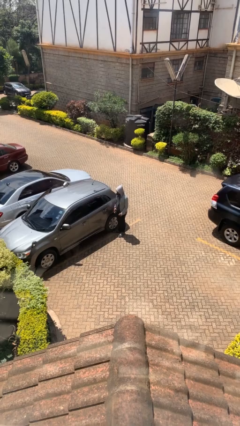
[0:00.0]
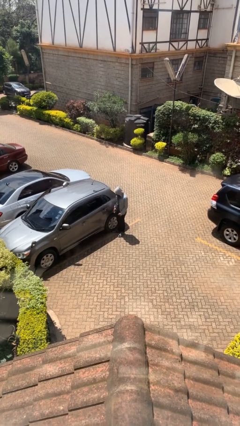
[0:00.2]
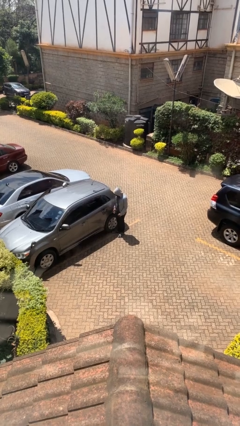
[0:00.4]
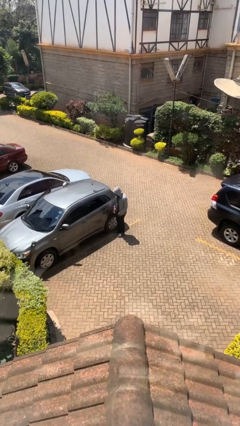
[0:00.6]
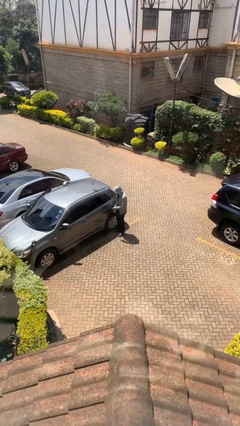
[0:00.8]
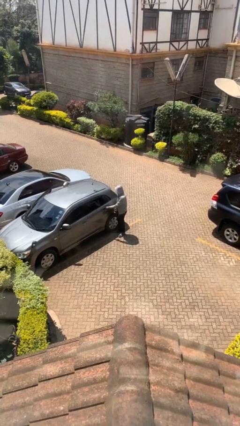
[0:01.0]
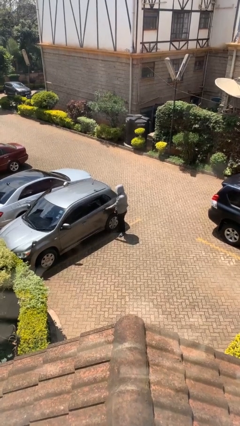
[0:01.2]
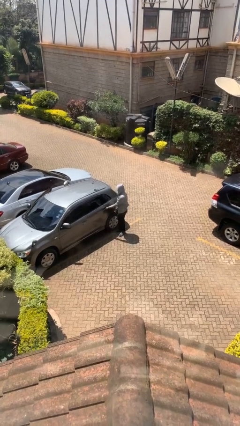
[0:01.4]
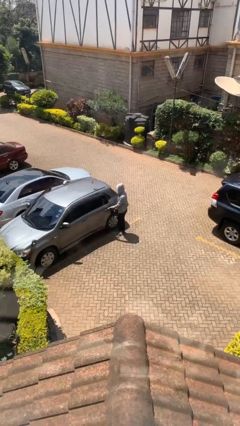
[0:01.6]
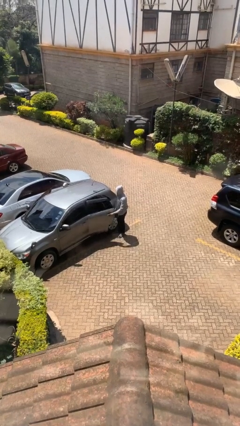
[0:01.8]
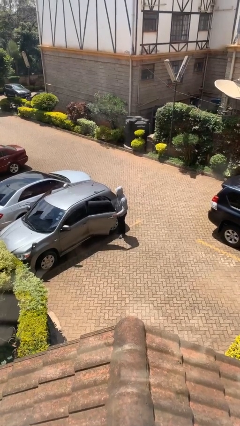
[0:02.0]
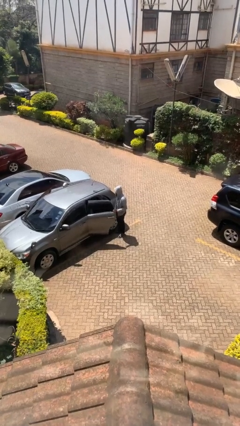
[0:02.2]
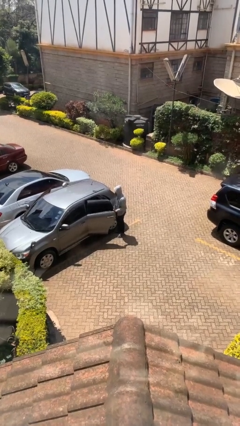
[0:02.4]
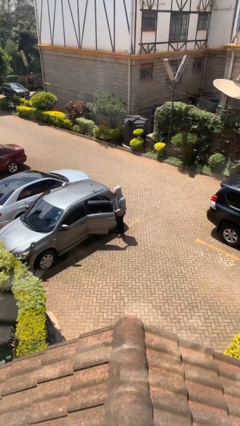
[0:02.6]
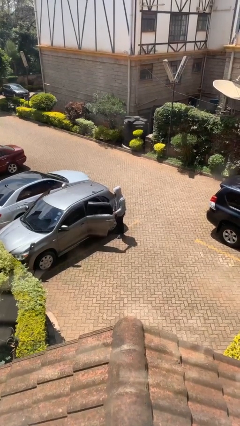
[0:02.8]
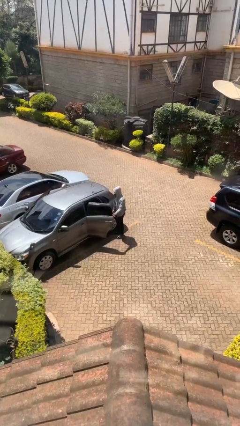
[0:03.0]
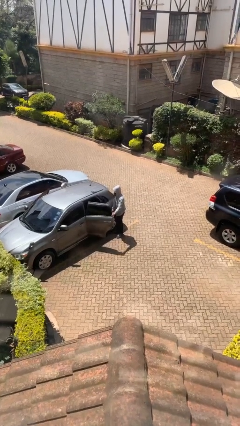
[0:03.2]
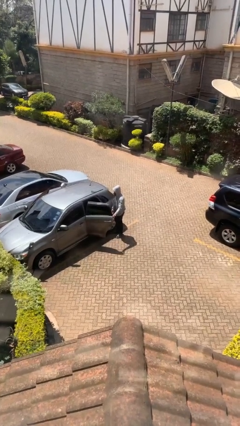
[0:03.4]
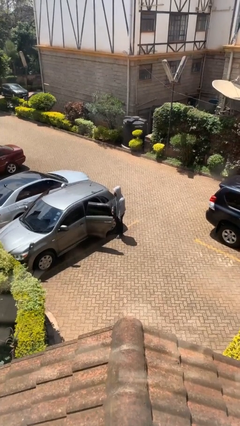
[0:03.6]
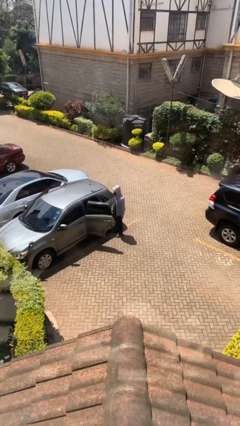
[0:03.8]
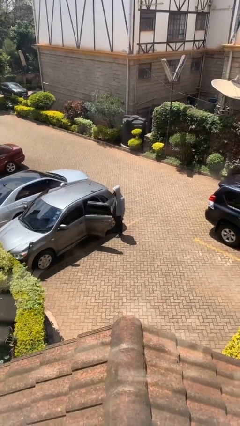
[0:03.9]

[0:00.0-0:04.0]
person opens car door

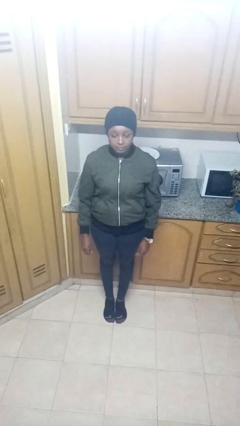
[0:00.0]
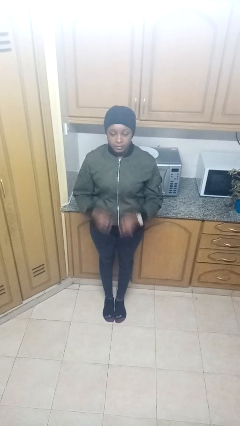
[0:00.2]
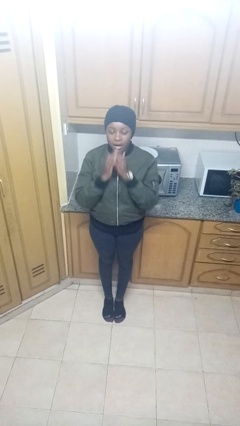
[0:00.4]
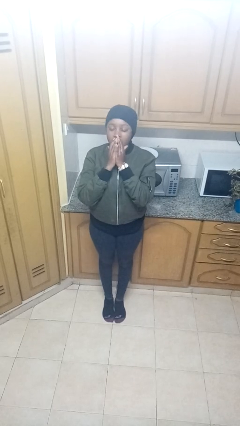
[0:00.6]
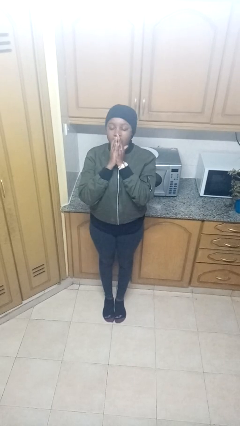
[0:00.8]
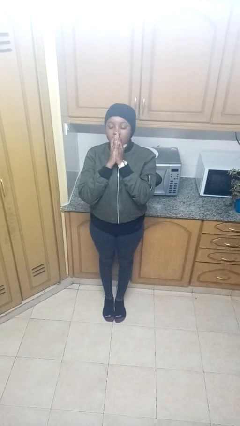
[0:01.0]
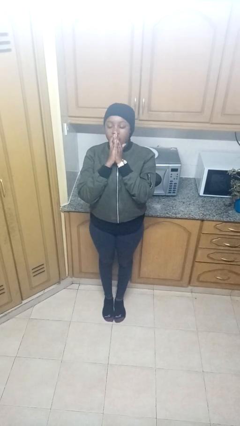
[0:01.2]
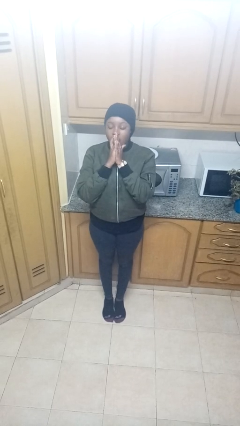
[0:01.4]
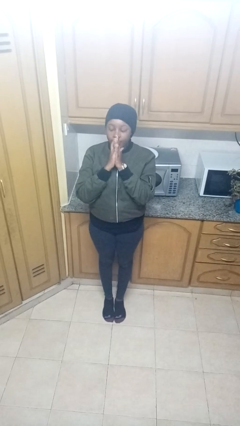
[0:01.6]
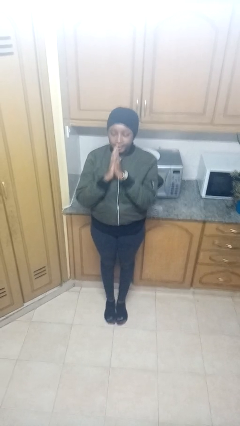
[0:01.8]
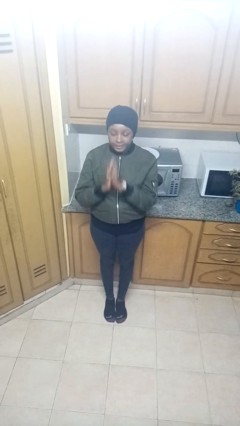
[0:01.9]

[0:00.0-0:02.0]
person yawns

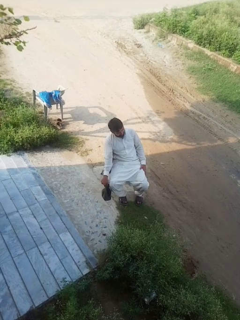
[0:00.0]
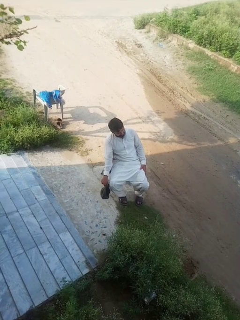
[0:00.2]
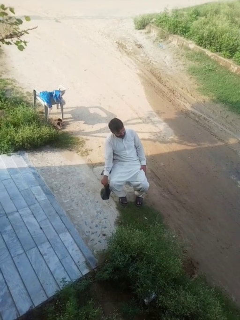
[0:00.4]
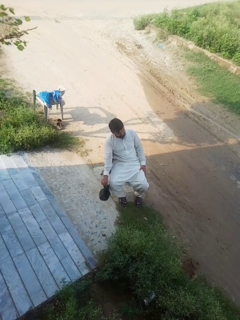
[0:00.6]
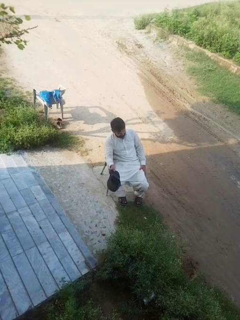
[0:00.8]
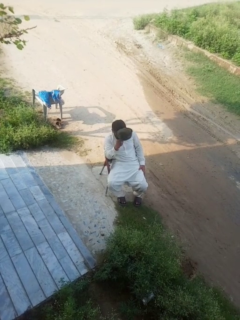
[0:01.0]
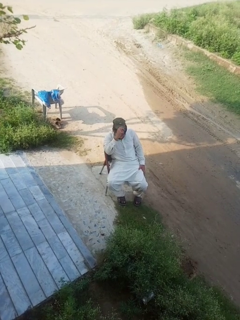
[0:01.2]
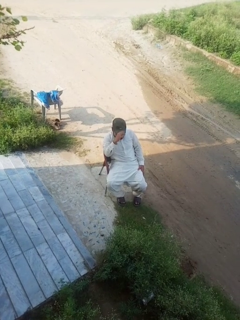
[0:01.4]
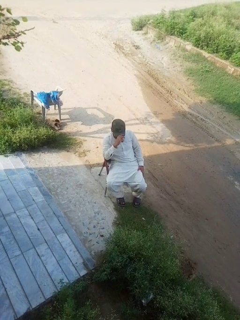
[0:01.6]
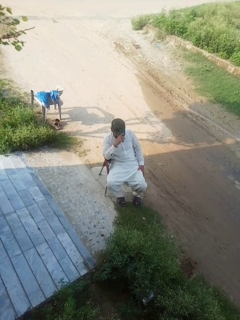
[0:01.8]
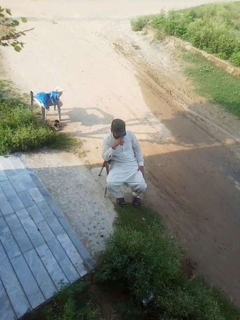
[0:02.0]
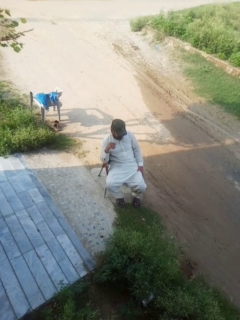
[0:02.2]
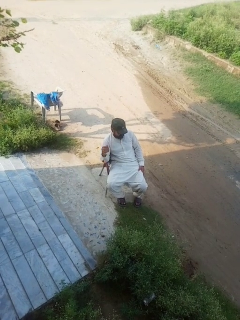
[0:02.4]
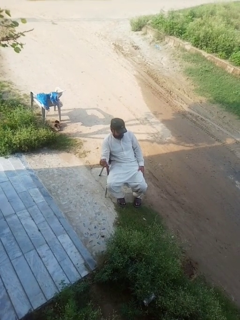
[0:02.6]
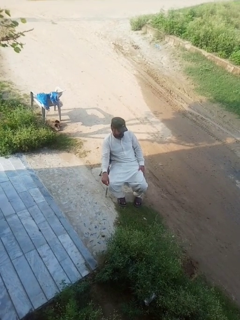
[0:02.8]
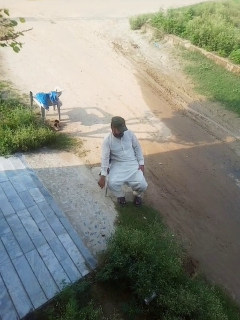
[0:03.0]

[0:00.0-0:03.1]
person puts on hat

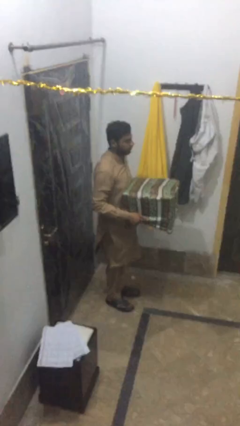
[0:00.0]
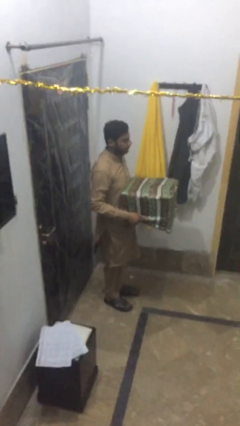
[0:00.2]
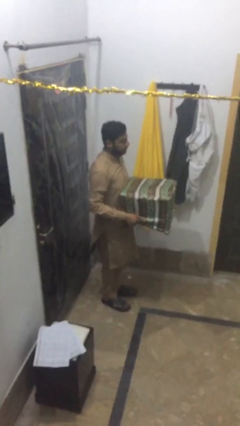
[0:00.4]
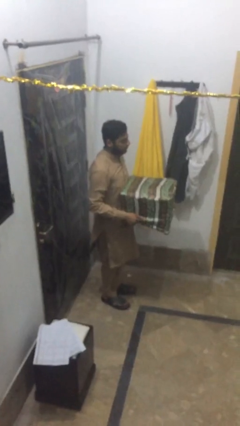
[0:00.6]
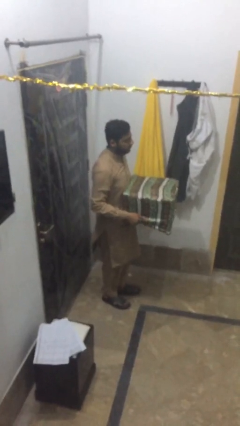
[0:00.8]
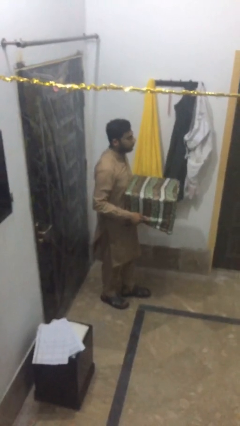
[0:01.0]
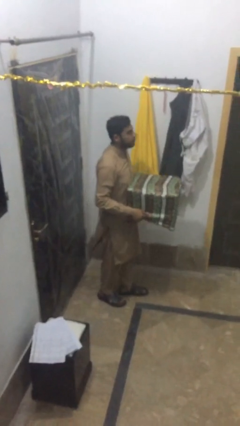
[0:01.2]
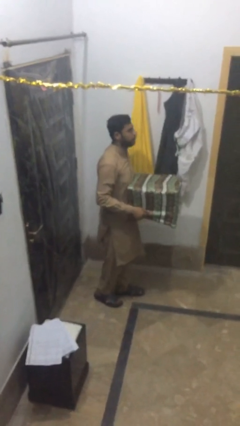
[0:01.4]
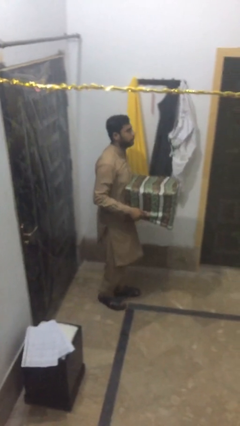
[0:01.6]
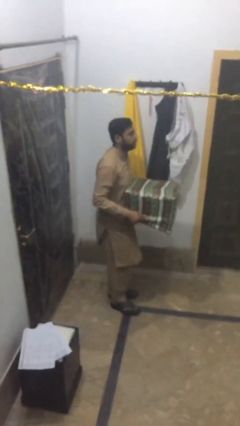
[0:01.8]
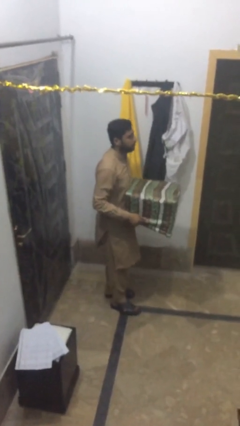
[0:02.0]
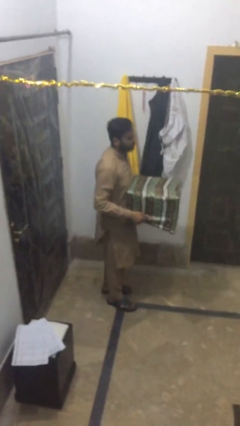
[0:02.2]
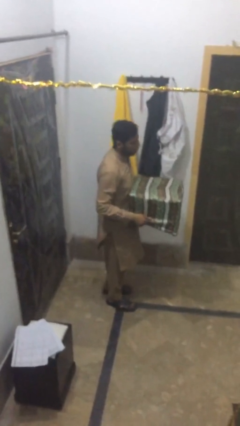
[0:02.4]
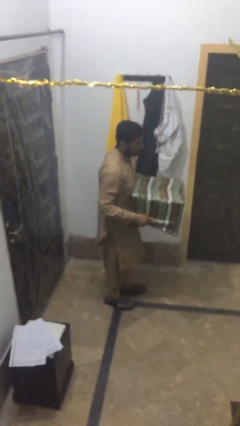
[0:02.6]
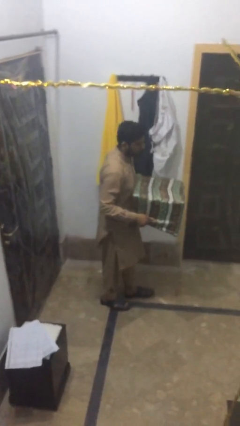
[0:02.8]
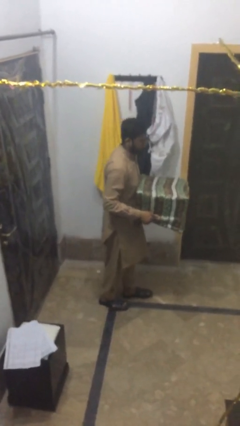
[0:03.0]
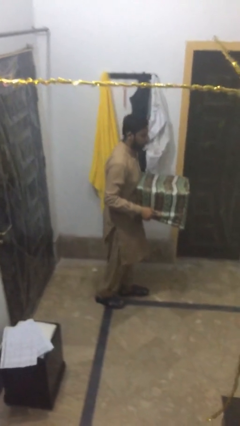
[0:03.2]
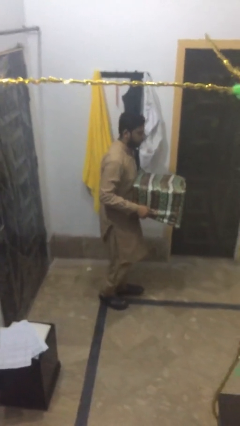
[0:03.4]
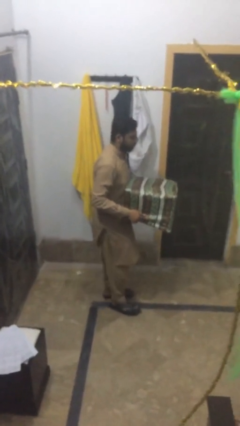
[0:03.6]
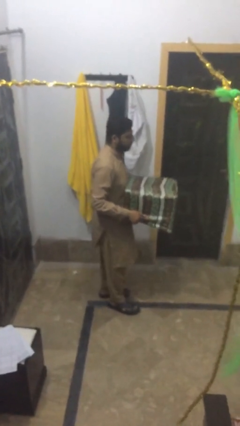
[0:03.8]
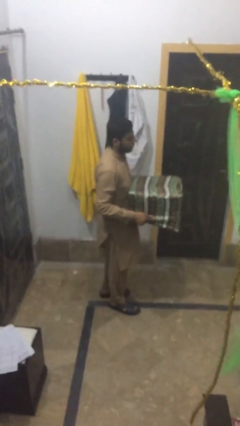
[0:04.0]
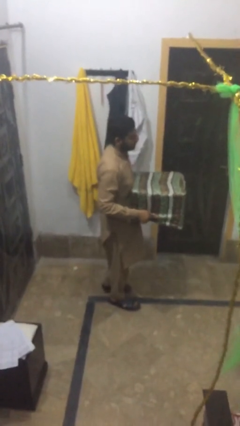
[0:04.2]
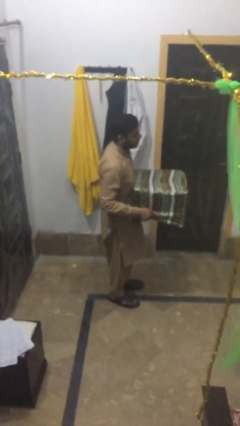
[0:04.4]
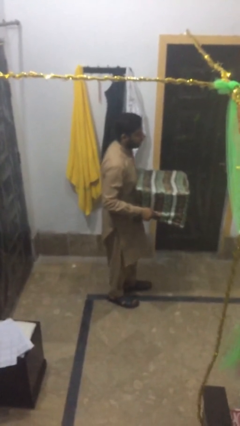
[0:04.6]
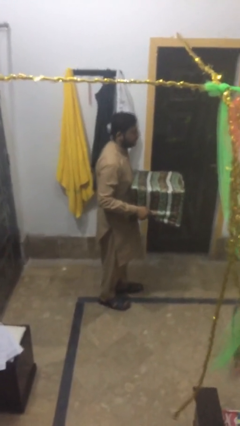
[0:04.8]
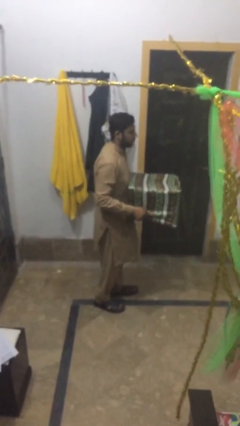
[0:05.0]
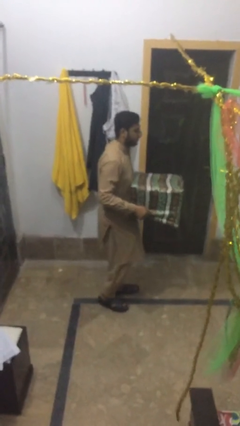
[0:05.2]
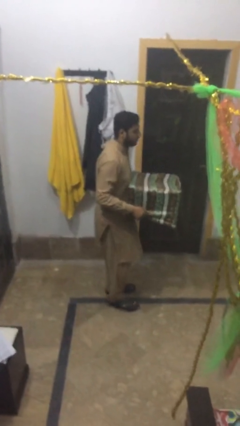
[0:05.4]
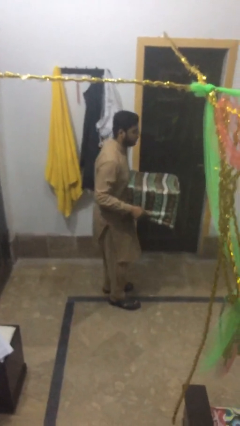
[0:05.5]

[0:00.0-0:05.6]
person carries heavy object

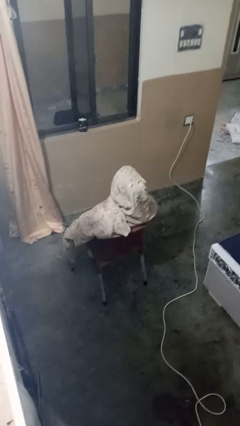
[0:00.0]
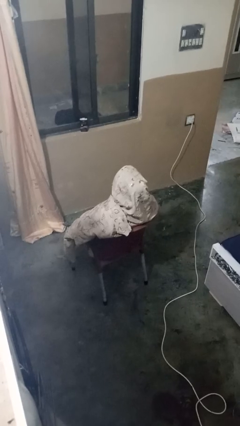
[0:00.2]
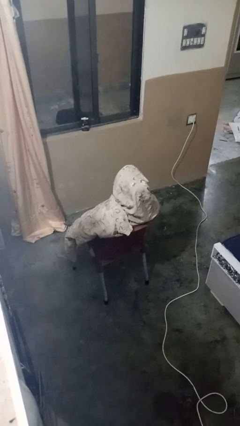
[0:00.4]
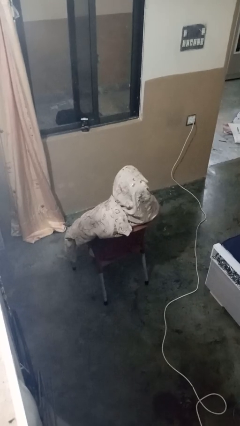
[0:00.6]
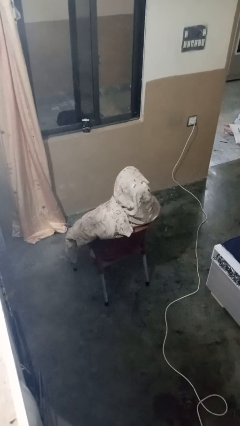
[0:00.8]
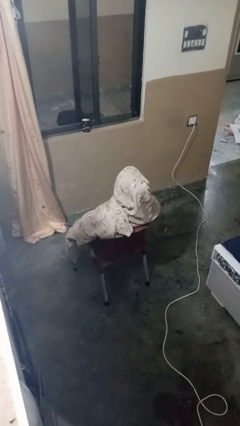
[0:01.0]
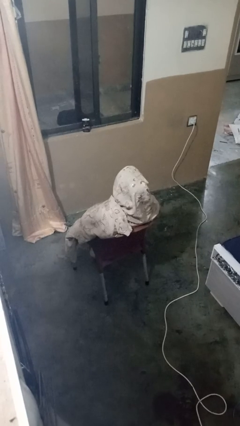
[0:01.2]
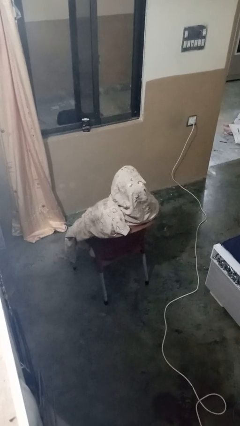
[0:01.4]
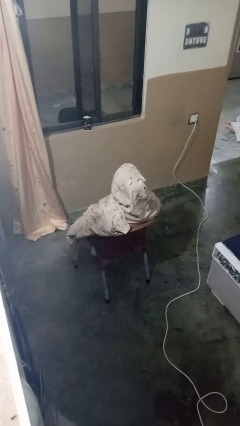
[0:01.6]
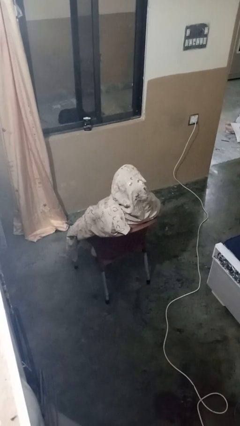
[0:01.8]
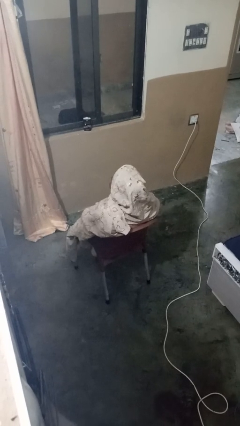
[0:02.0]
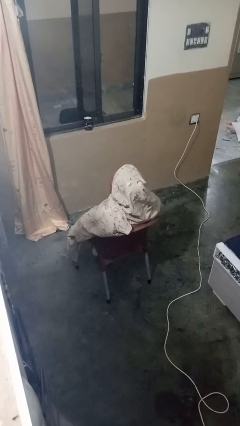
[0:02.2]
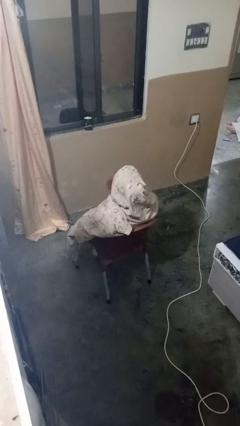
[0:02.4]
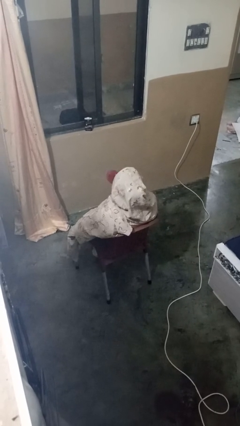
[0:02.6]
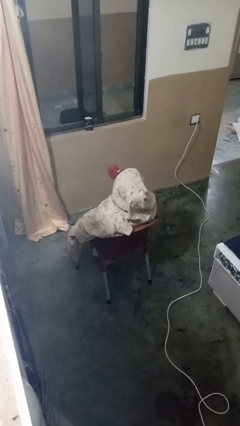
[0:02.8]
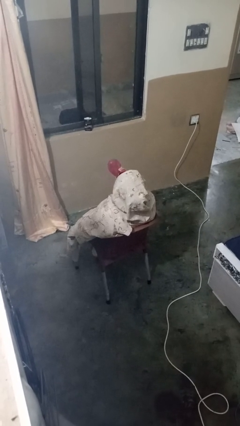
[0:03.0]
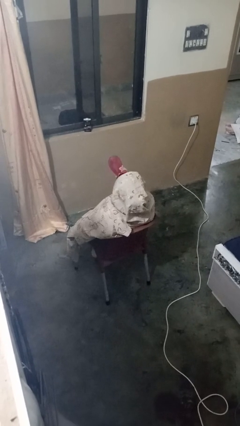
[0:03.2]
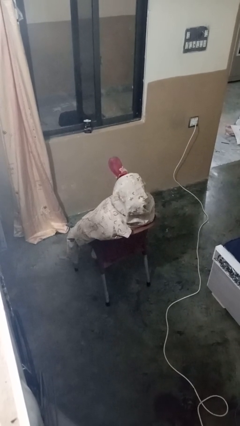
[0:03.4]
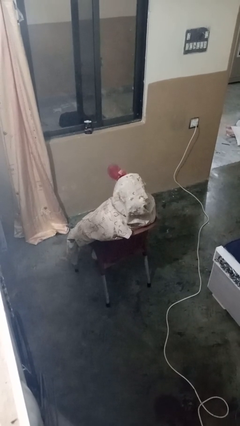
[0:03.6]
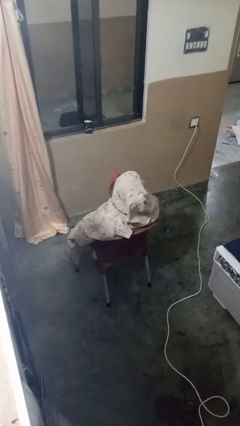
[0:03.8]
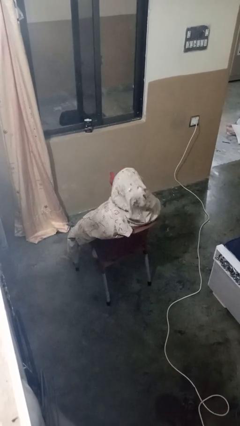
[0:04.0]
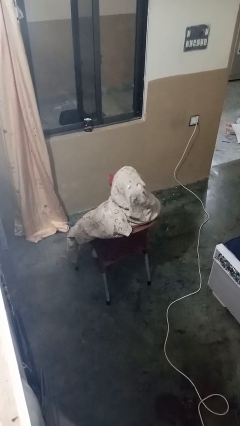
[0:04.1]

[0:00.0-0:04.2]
person drinks from bottle
